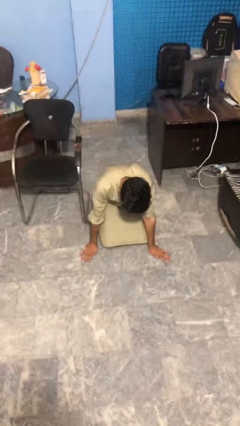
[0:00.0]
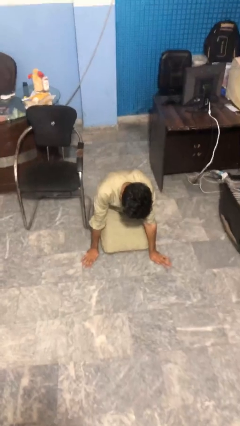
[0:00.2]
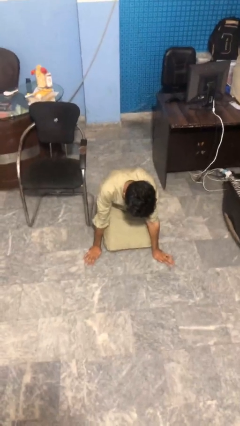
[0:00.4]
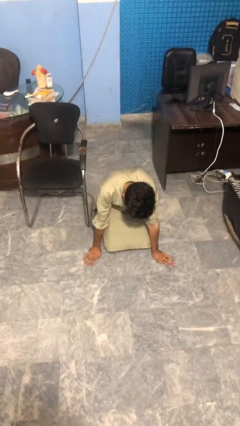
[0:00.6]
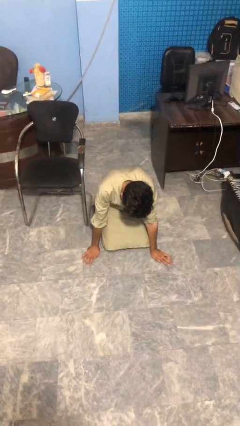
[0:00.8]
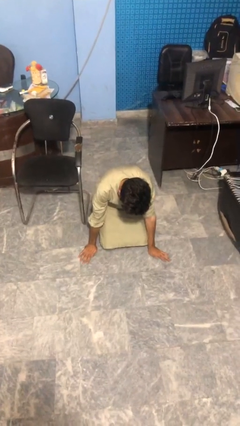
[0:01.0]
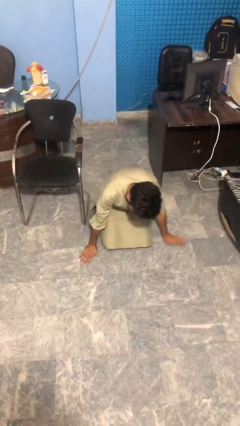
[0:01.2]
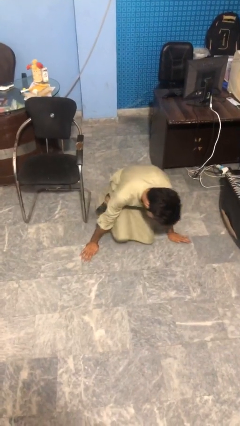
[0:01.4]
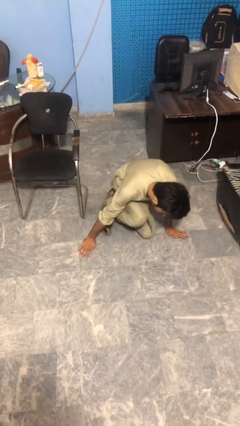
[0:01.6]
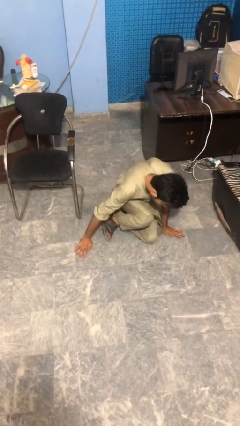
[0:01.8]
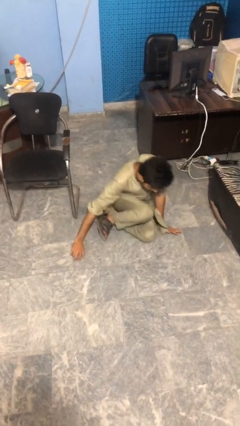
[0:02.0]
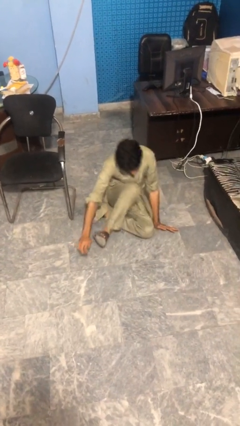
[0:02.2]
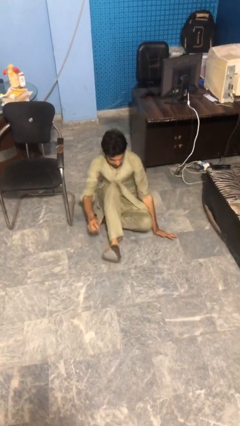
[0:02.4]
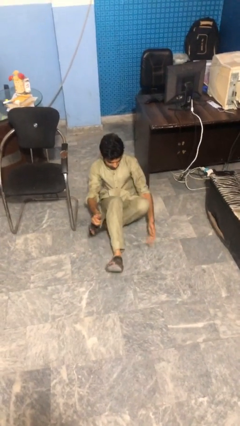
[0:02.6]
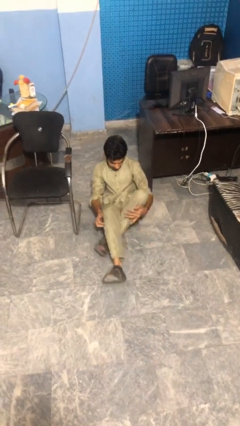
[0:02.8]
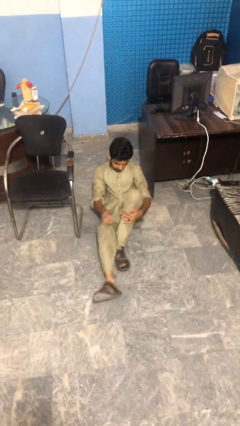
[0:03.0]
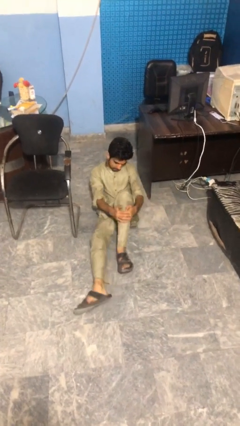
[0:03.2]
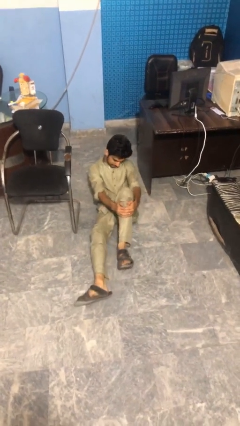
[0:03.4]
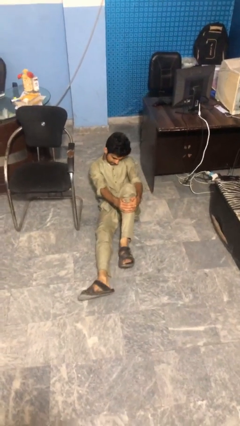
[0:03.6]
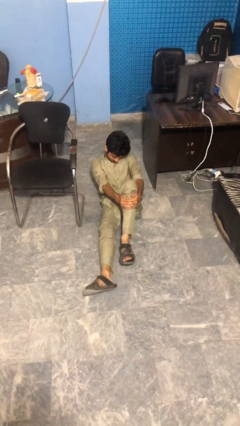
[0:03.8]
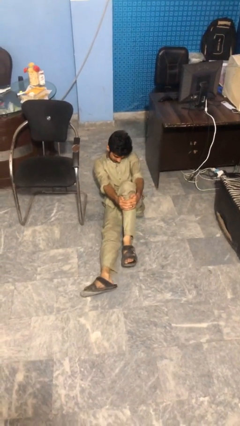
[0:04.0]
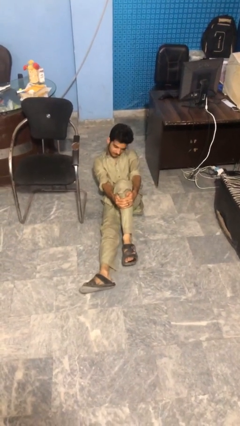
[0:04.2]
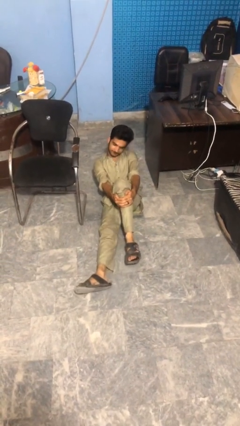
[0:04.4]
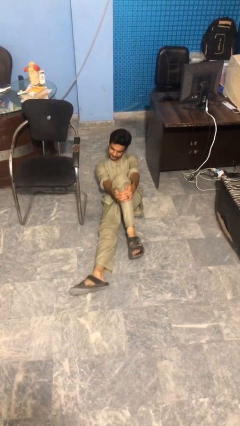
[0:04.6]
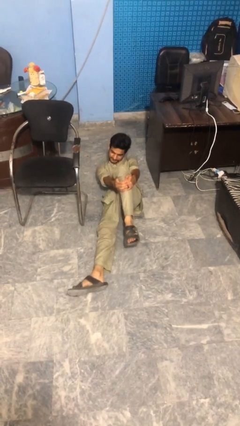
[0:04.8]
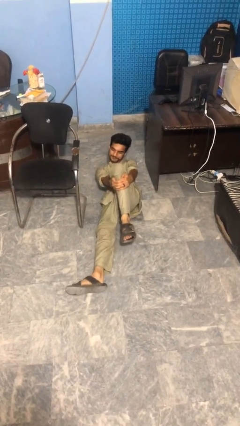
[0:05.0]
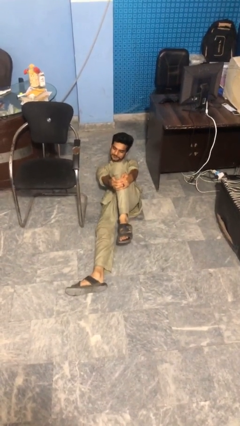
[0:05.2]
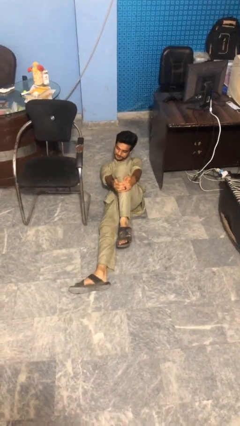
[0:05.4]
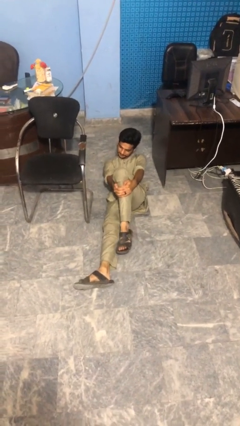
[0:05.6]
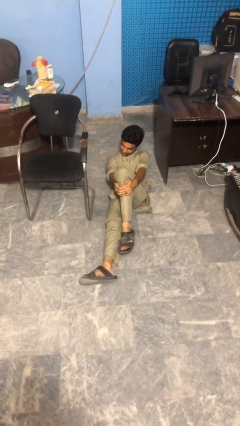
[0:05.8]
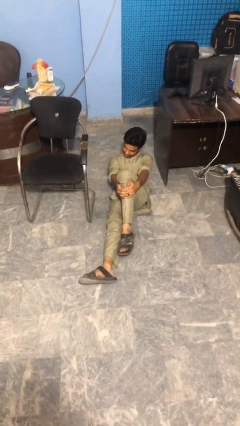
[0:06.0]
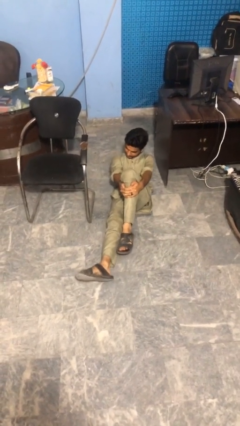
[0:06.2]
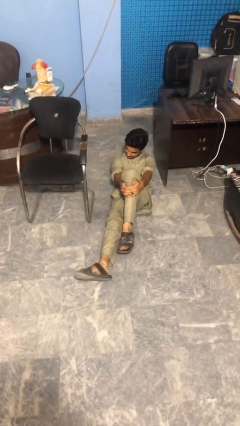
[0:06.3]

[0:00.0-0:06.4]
person lies down on floor

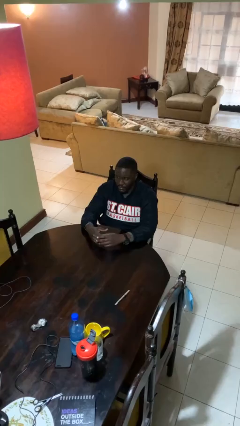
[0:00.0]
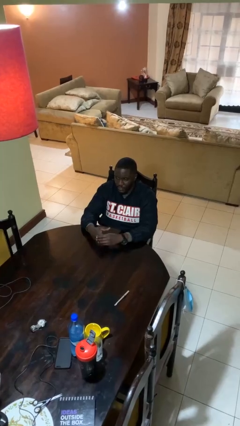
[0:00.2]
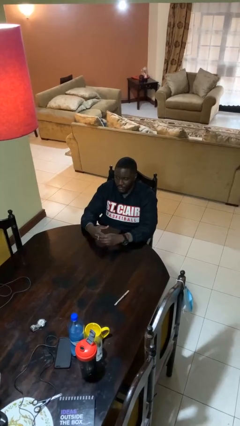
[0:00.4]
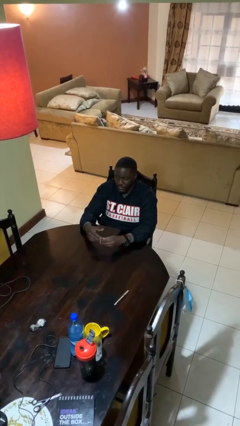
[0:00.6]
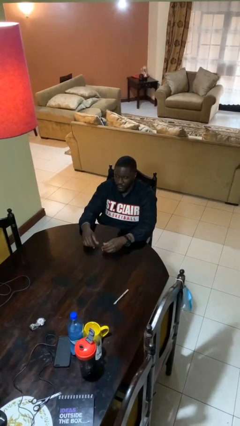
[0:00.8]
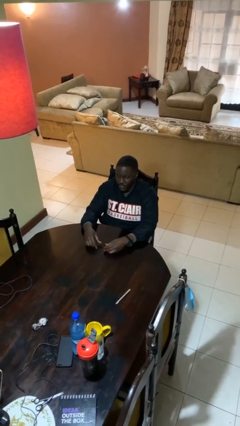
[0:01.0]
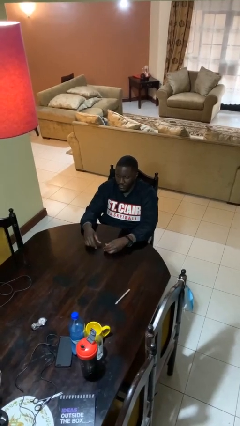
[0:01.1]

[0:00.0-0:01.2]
person takes off ring

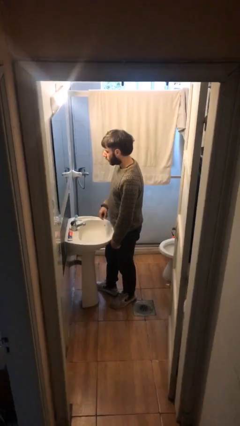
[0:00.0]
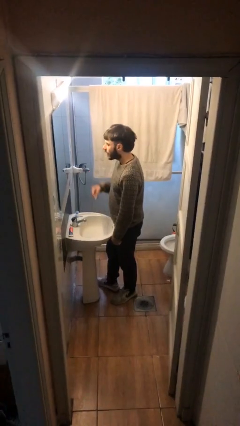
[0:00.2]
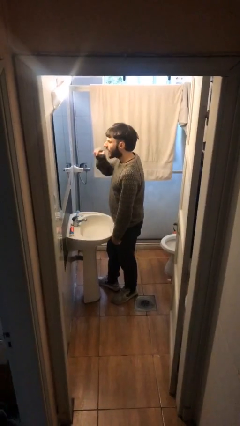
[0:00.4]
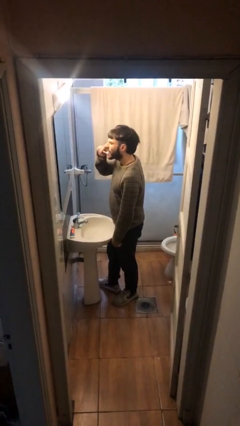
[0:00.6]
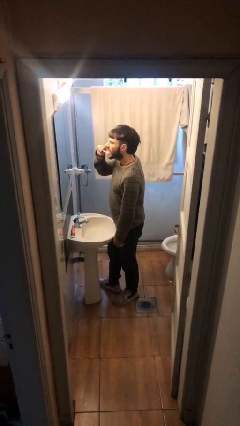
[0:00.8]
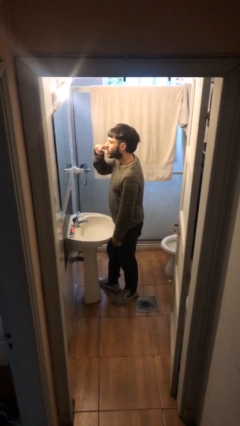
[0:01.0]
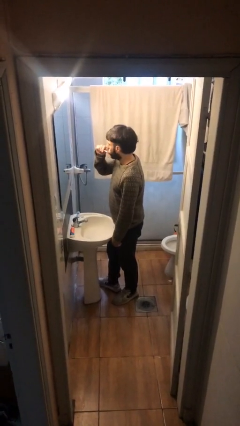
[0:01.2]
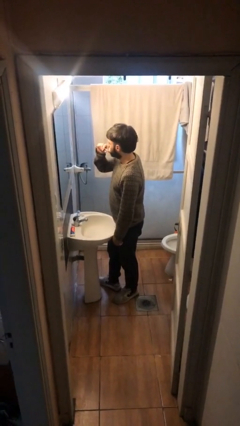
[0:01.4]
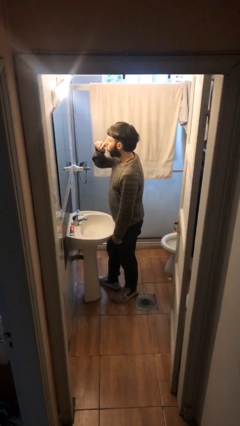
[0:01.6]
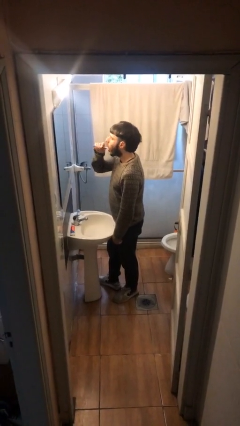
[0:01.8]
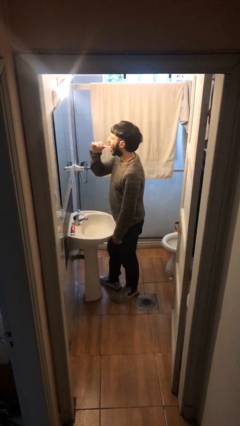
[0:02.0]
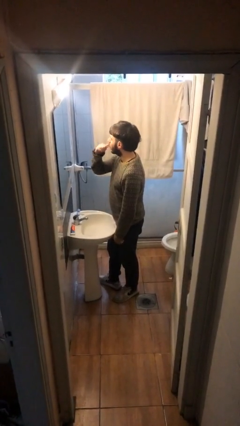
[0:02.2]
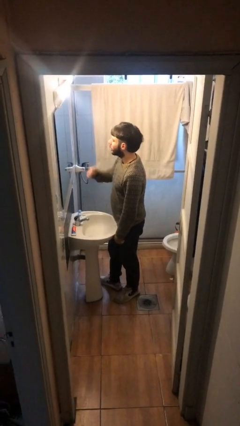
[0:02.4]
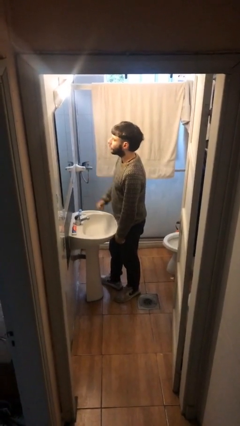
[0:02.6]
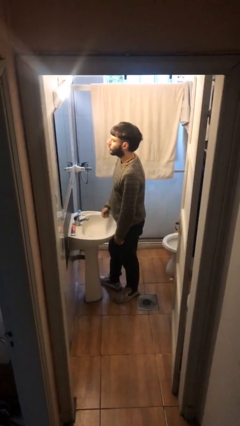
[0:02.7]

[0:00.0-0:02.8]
person brushes teeth

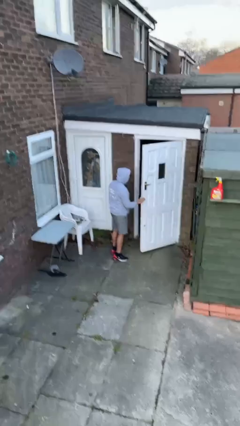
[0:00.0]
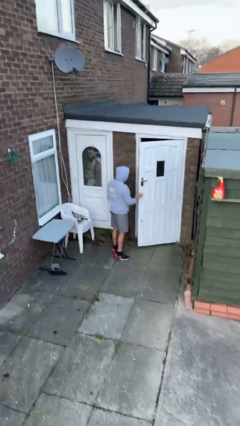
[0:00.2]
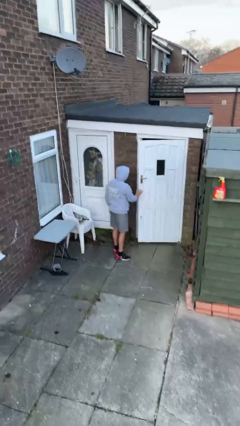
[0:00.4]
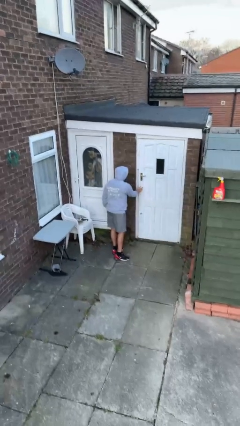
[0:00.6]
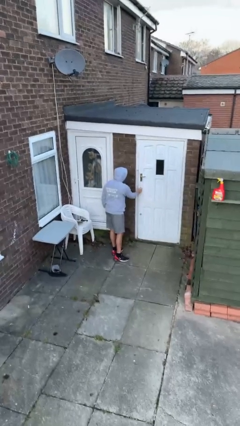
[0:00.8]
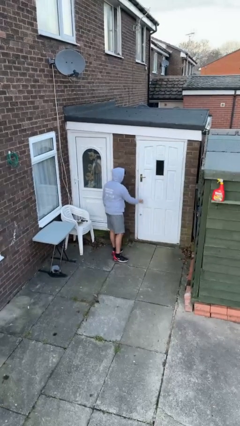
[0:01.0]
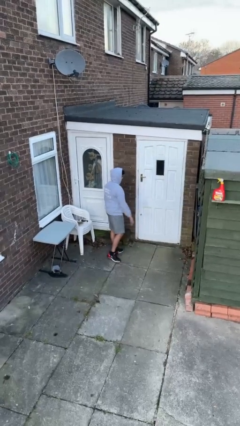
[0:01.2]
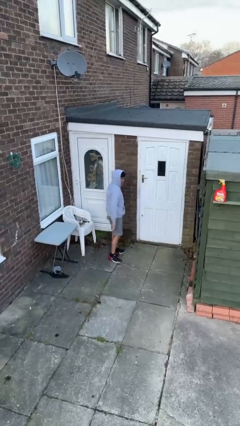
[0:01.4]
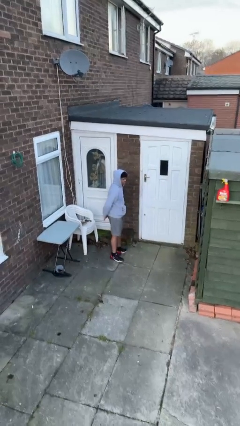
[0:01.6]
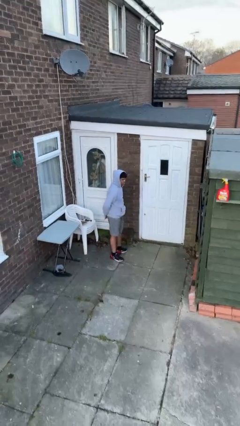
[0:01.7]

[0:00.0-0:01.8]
person closes facility door

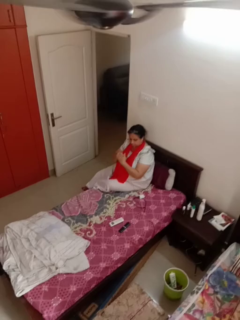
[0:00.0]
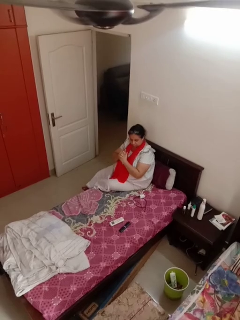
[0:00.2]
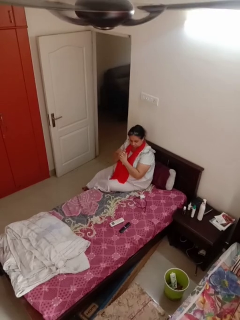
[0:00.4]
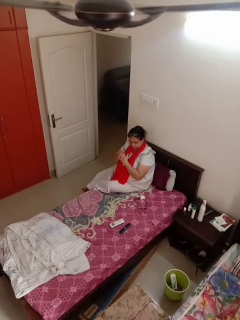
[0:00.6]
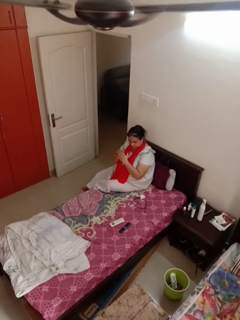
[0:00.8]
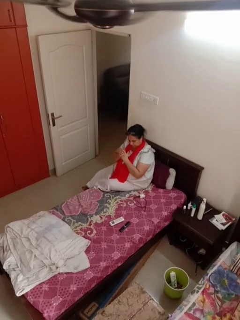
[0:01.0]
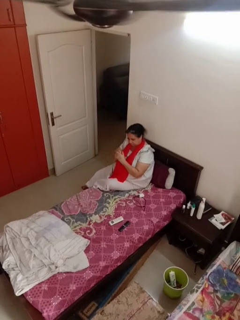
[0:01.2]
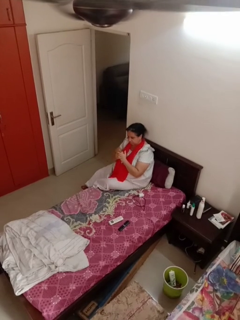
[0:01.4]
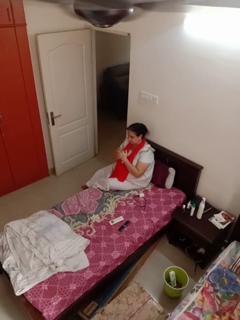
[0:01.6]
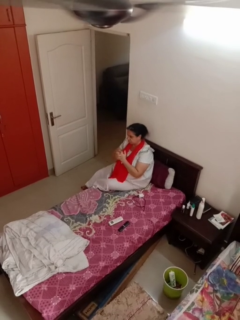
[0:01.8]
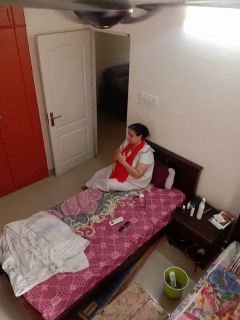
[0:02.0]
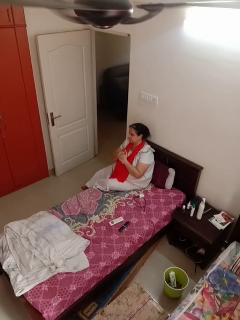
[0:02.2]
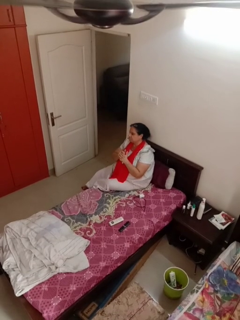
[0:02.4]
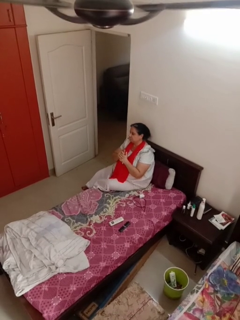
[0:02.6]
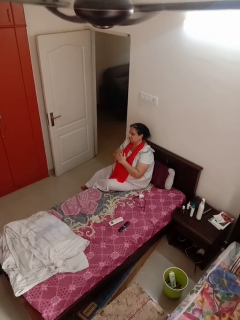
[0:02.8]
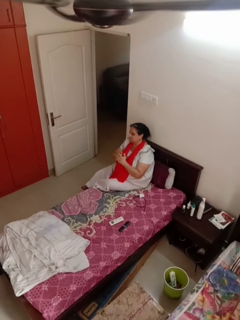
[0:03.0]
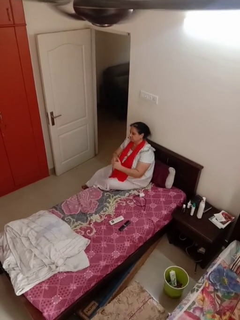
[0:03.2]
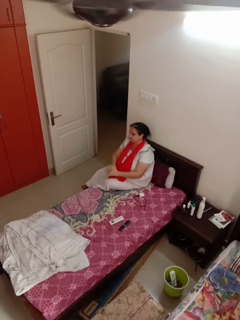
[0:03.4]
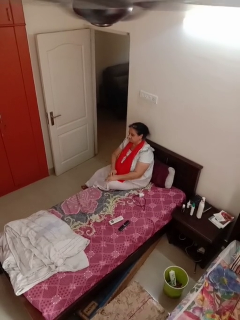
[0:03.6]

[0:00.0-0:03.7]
person cracks knuckles

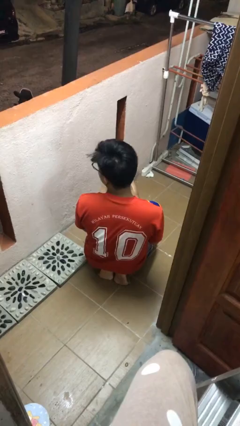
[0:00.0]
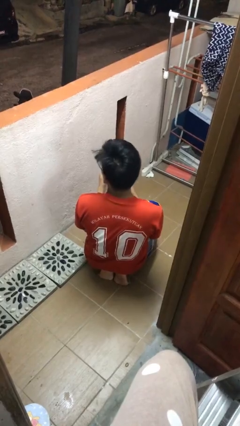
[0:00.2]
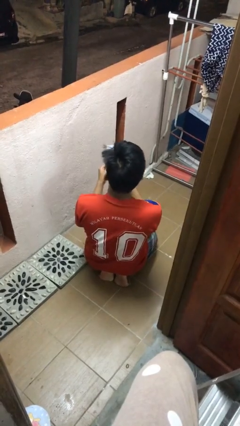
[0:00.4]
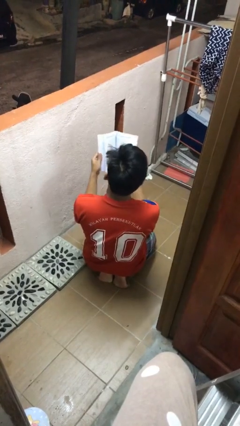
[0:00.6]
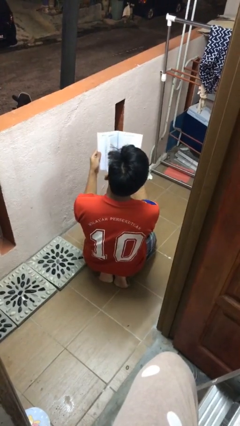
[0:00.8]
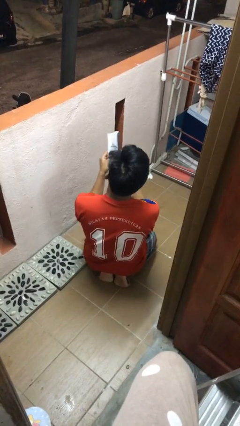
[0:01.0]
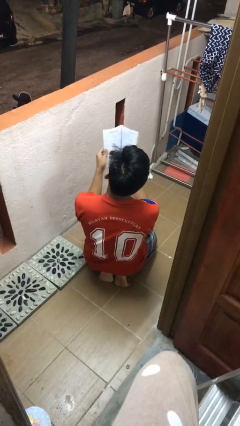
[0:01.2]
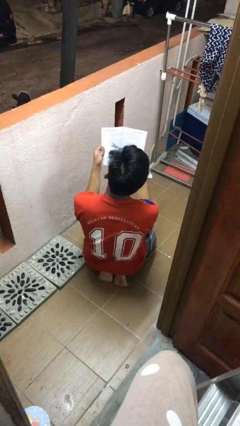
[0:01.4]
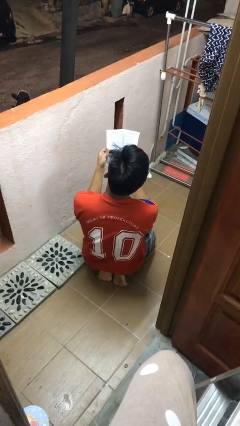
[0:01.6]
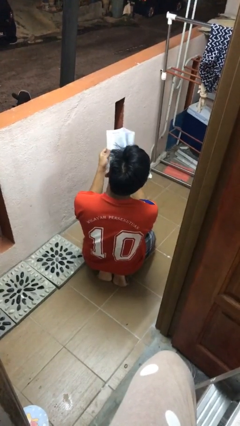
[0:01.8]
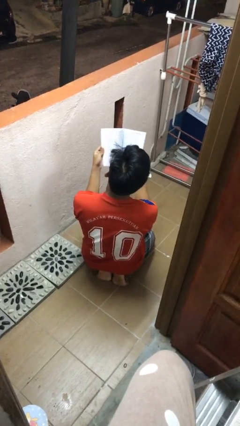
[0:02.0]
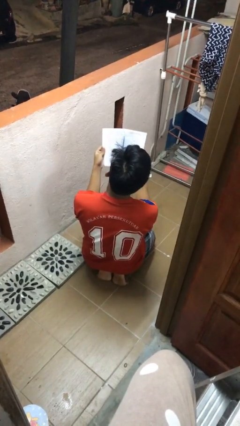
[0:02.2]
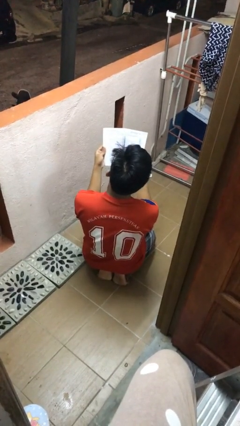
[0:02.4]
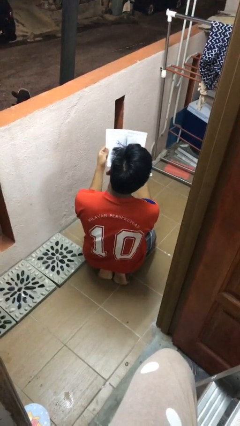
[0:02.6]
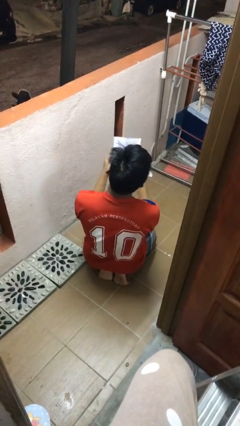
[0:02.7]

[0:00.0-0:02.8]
person reads book

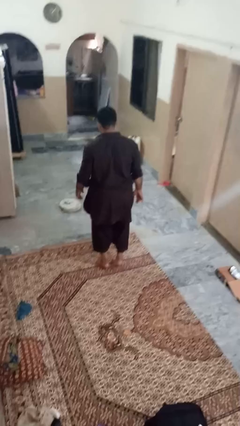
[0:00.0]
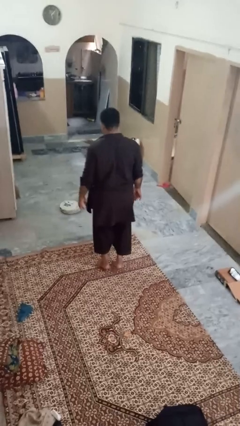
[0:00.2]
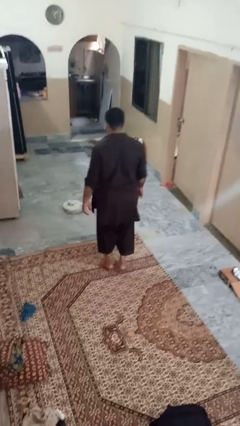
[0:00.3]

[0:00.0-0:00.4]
person walks tiptoe
